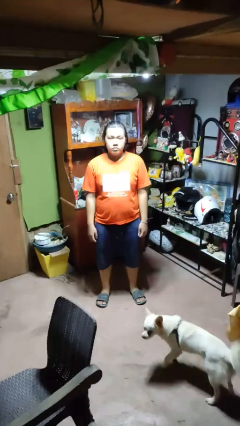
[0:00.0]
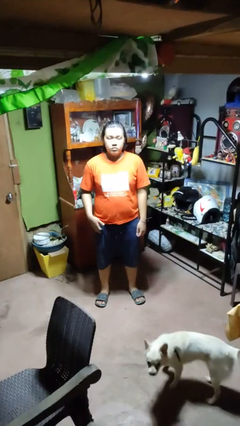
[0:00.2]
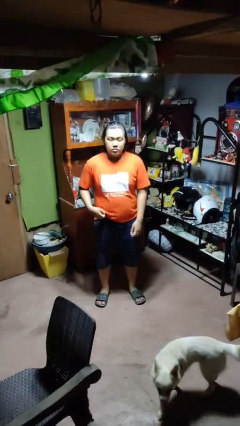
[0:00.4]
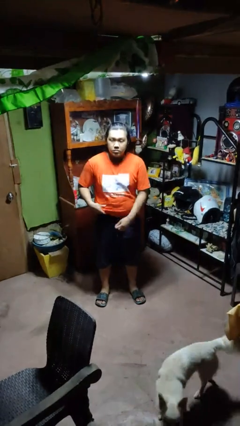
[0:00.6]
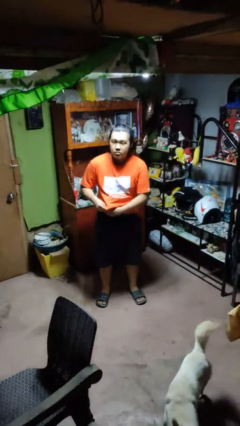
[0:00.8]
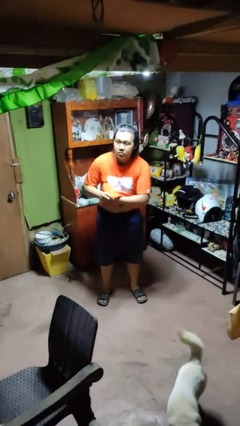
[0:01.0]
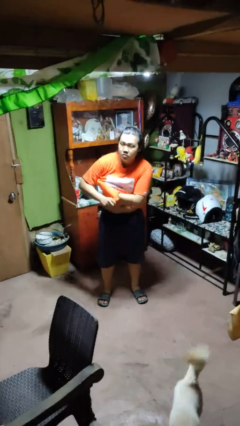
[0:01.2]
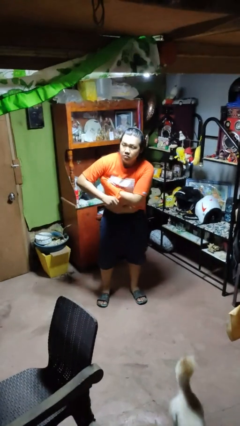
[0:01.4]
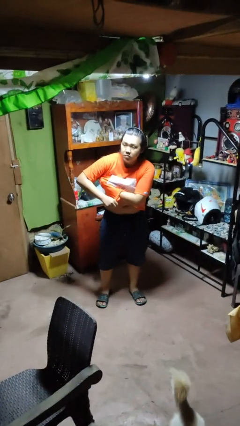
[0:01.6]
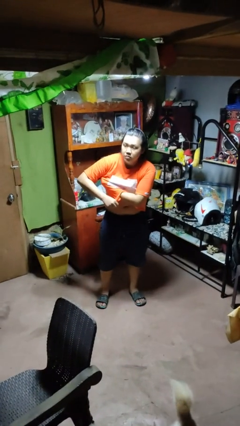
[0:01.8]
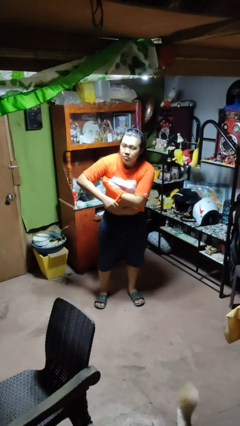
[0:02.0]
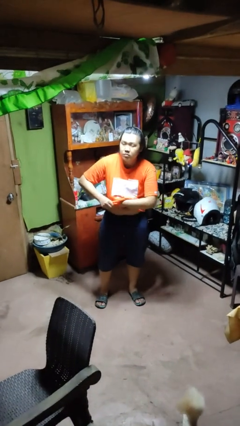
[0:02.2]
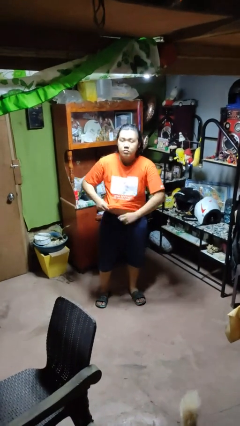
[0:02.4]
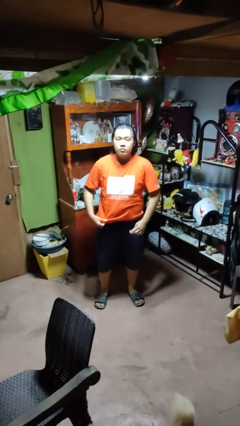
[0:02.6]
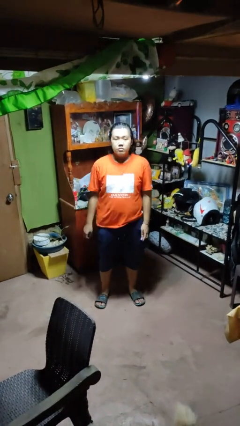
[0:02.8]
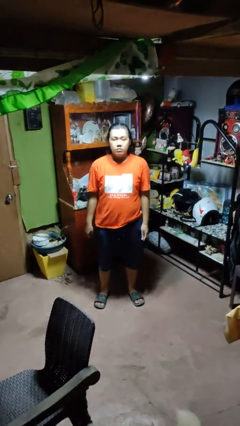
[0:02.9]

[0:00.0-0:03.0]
person applies deodorant

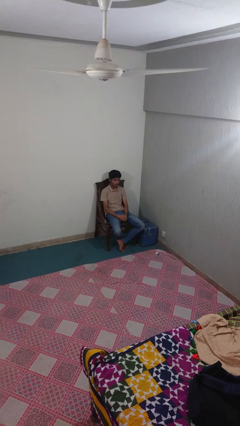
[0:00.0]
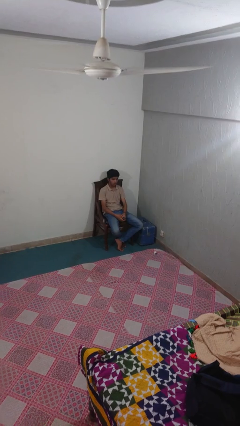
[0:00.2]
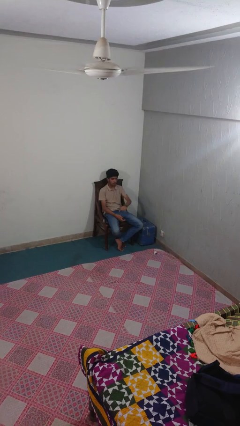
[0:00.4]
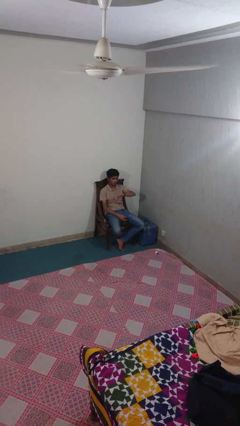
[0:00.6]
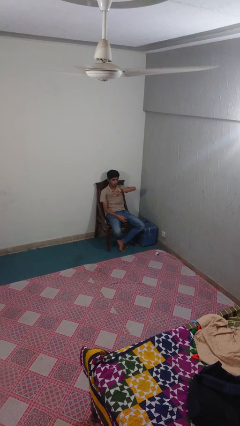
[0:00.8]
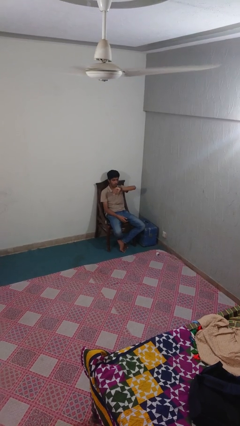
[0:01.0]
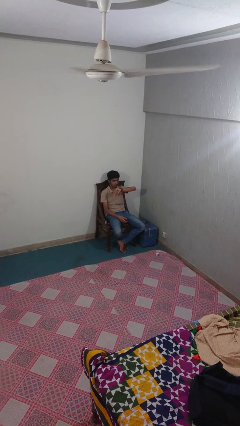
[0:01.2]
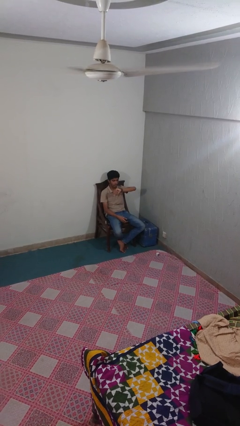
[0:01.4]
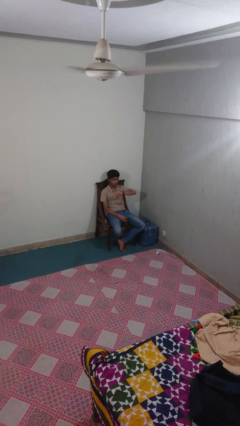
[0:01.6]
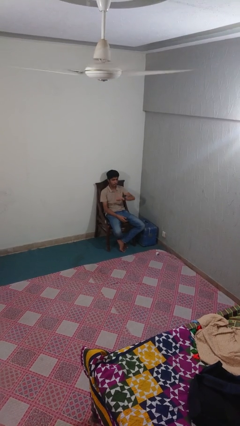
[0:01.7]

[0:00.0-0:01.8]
person looks at wristwatch

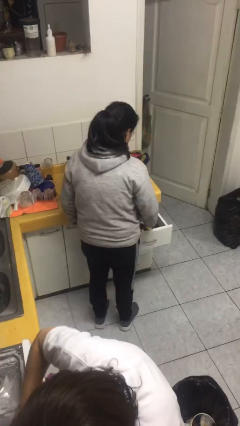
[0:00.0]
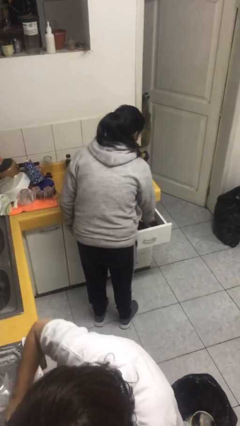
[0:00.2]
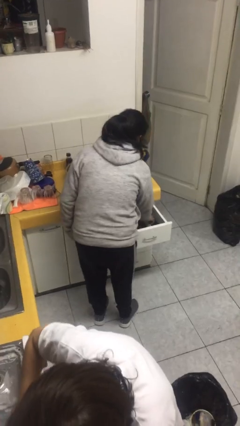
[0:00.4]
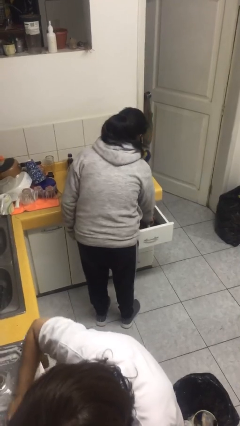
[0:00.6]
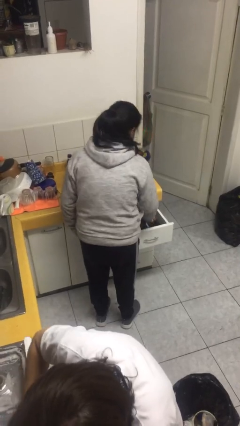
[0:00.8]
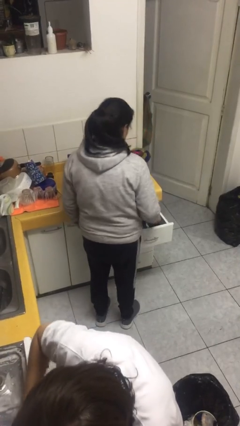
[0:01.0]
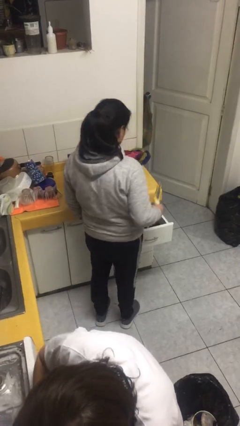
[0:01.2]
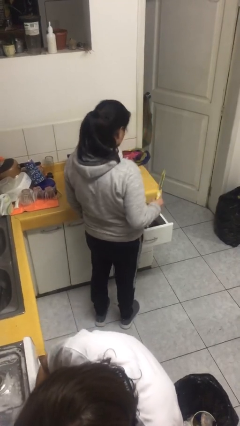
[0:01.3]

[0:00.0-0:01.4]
person takes object from kitchen drawer

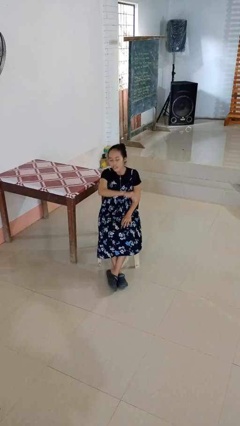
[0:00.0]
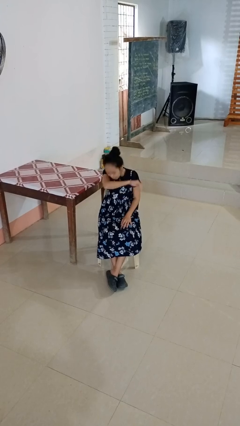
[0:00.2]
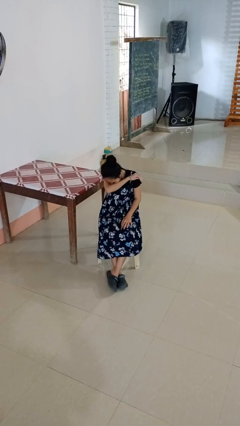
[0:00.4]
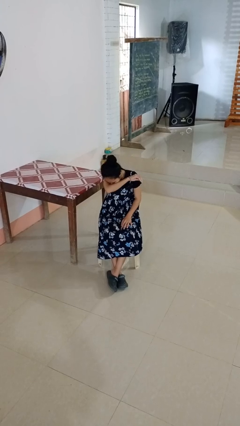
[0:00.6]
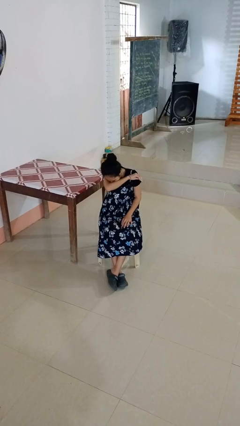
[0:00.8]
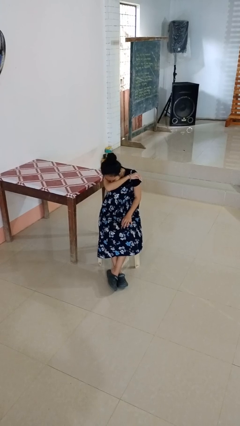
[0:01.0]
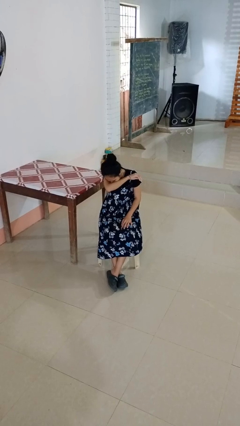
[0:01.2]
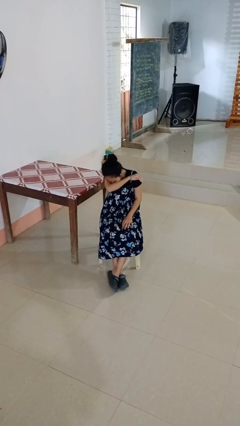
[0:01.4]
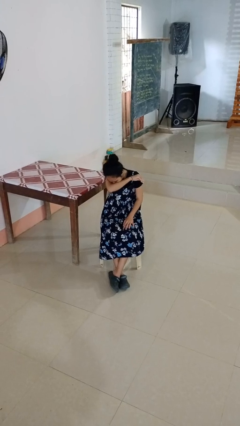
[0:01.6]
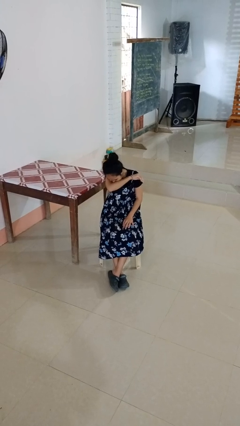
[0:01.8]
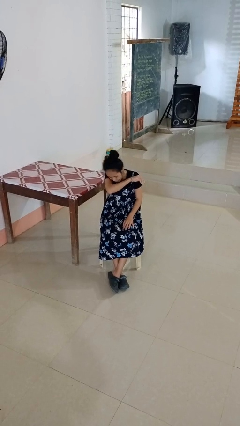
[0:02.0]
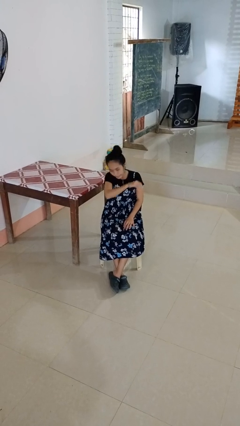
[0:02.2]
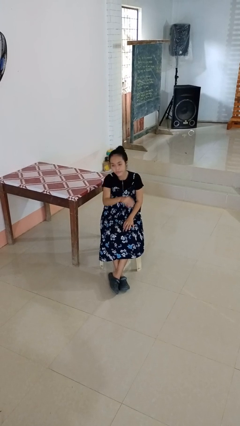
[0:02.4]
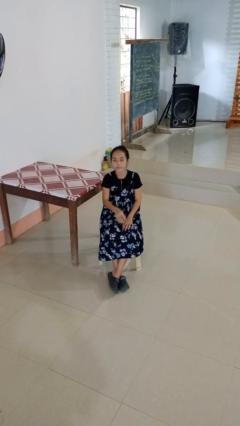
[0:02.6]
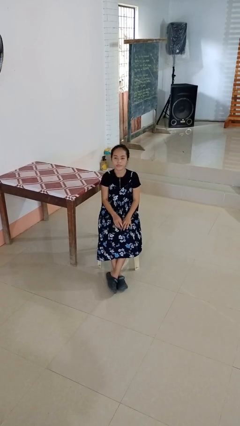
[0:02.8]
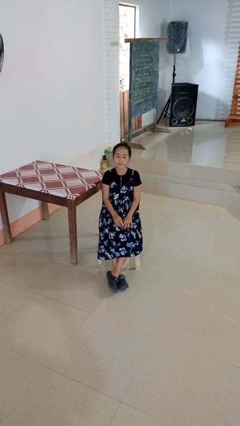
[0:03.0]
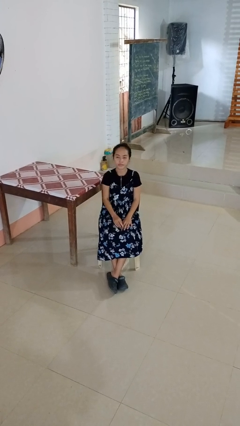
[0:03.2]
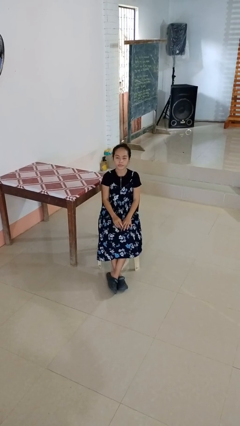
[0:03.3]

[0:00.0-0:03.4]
person sneezes into arm

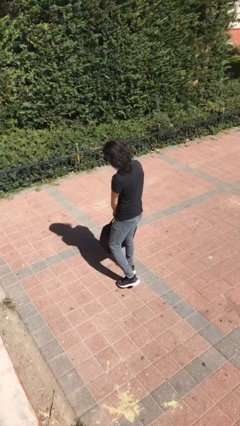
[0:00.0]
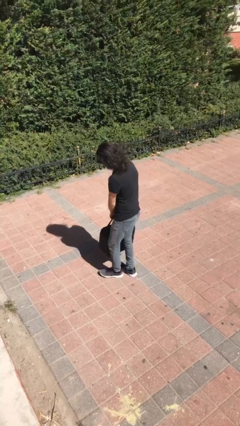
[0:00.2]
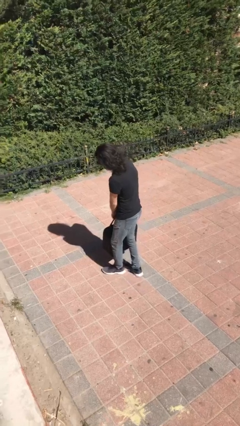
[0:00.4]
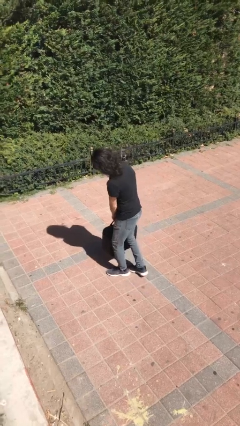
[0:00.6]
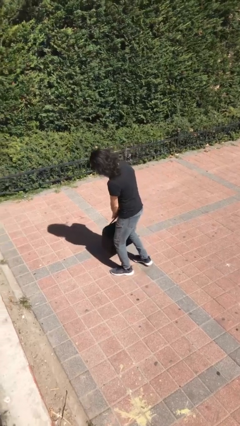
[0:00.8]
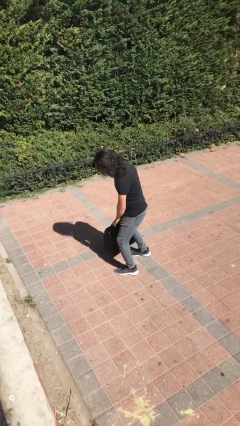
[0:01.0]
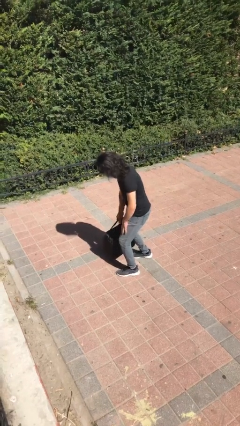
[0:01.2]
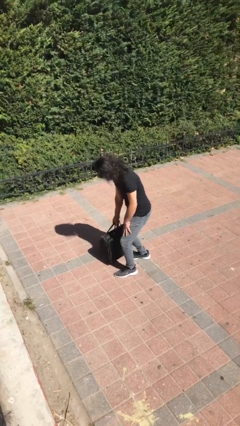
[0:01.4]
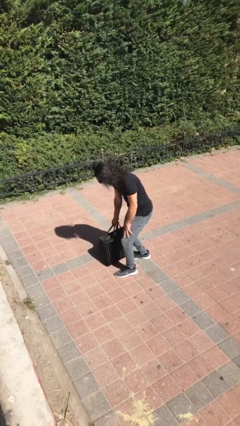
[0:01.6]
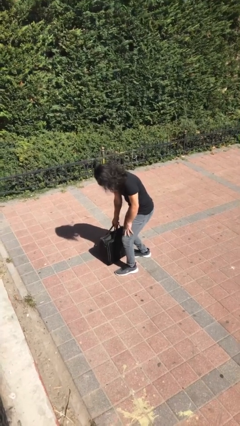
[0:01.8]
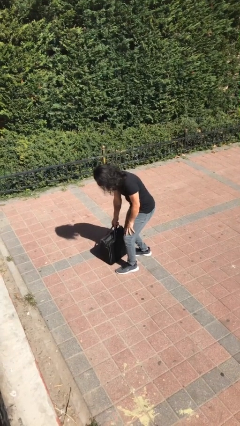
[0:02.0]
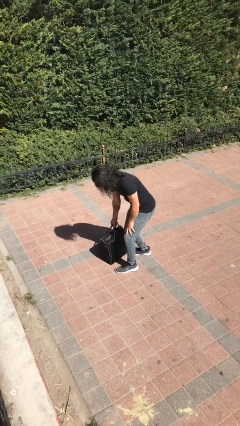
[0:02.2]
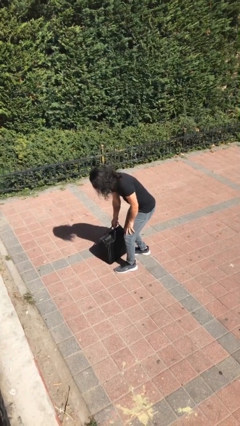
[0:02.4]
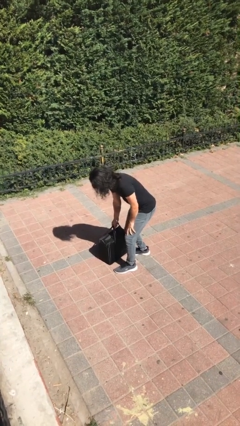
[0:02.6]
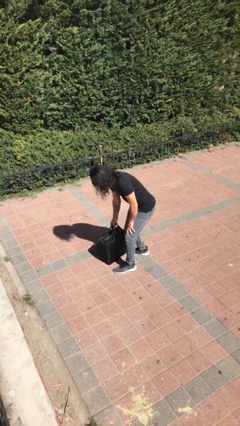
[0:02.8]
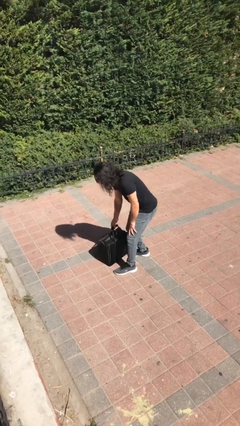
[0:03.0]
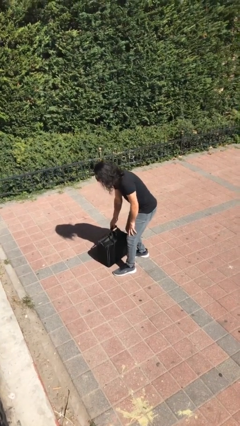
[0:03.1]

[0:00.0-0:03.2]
person puts down object on floor

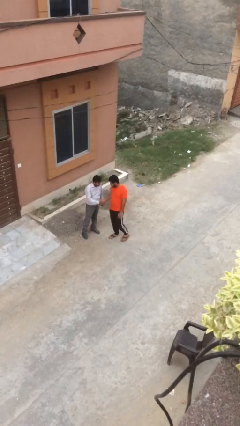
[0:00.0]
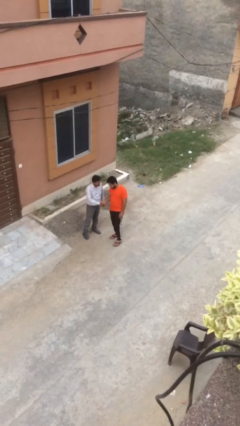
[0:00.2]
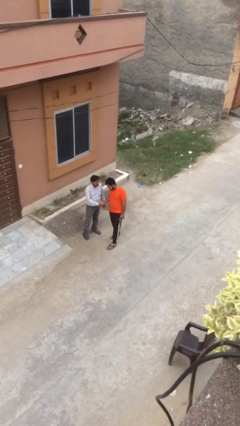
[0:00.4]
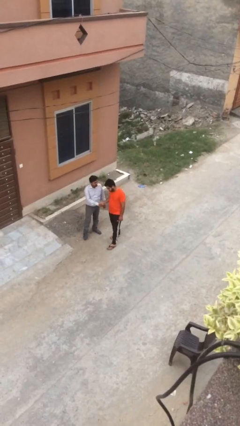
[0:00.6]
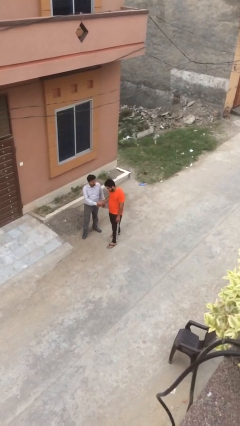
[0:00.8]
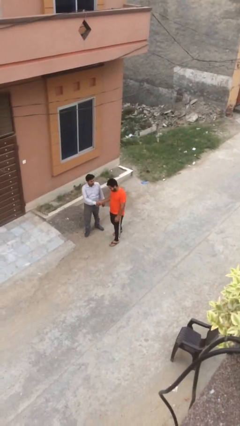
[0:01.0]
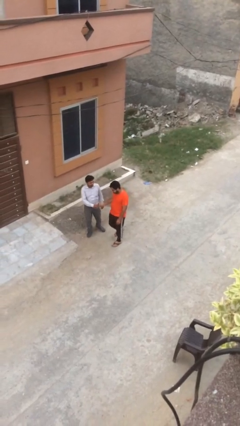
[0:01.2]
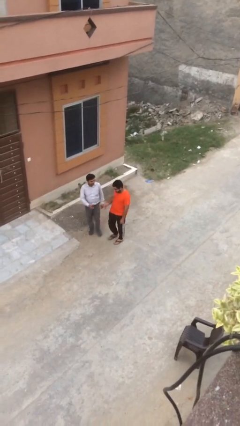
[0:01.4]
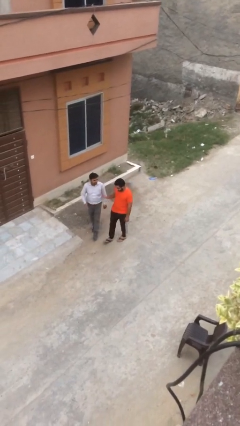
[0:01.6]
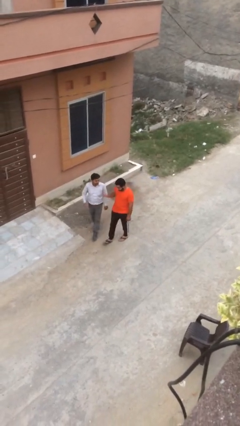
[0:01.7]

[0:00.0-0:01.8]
person shakes hand

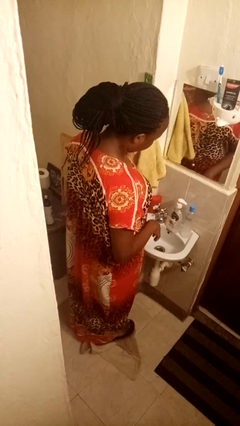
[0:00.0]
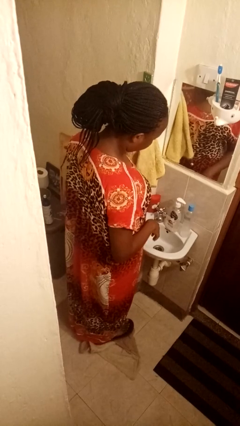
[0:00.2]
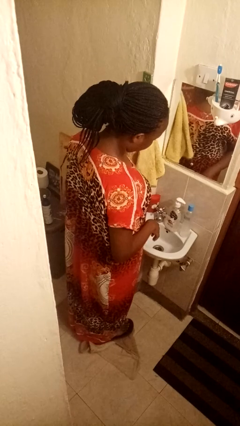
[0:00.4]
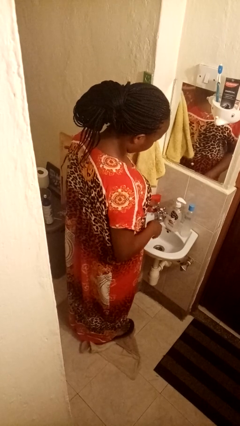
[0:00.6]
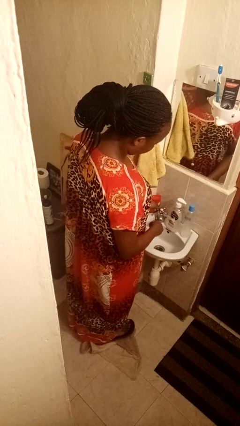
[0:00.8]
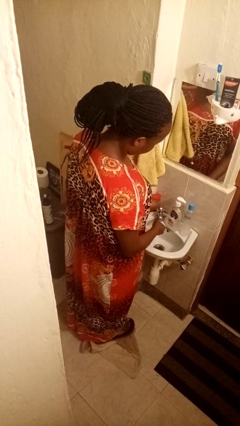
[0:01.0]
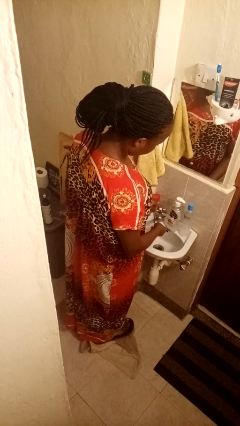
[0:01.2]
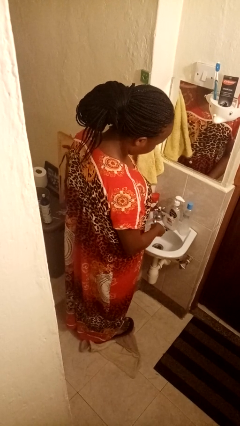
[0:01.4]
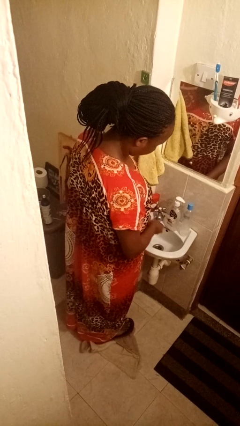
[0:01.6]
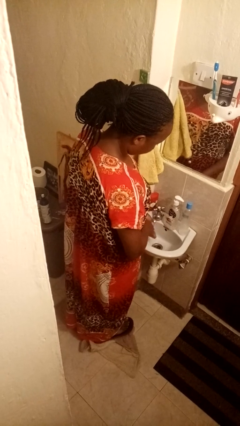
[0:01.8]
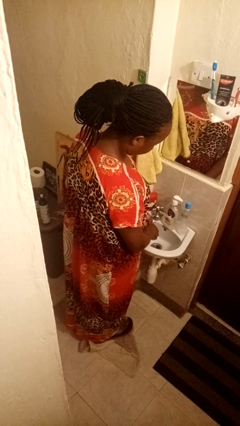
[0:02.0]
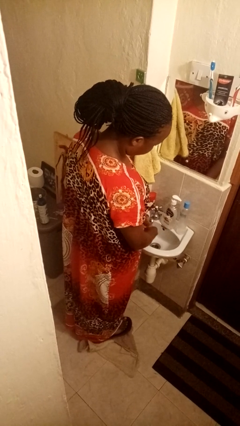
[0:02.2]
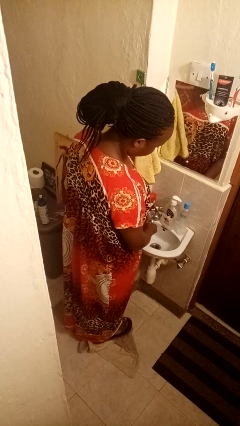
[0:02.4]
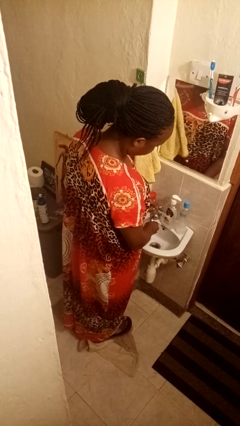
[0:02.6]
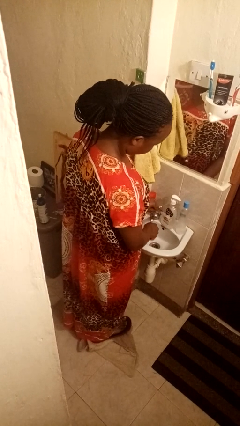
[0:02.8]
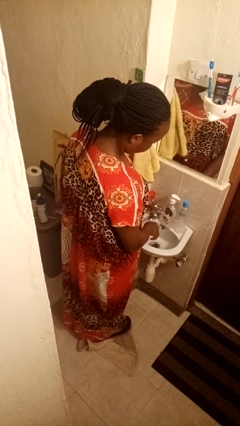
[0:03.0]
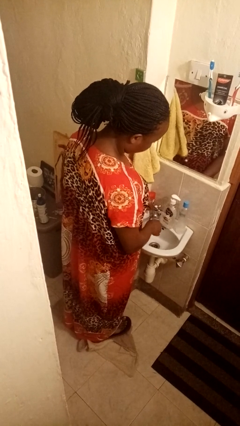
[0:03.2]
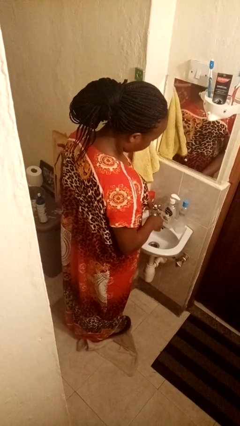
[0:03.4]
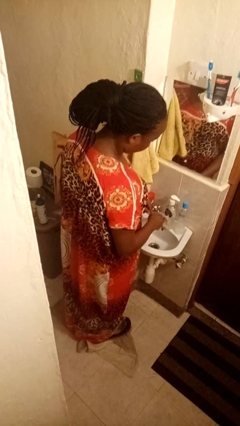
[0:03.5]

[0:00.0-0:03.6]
person washes hands
